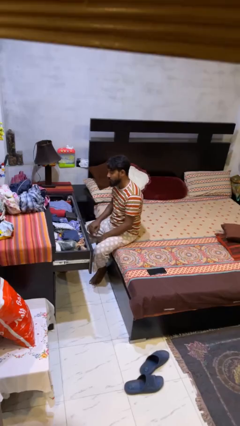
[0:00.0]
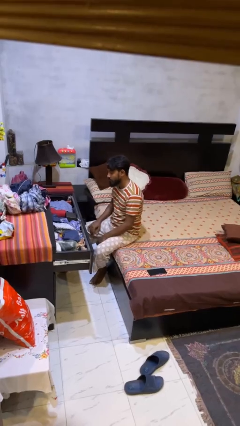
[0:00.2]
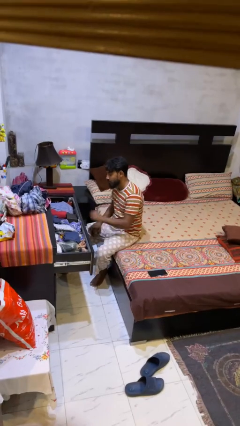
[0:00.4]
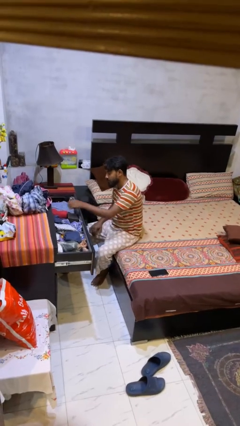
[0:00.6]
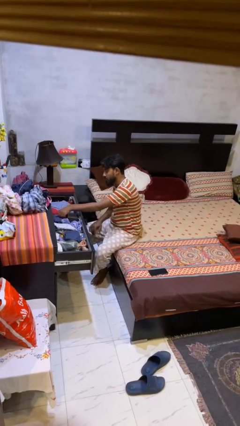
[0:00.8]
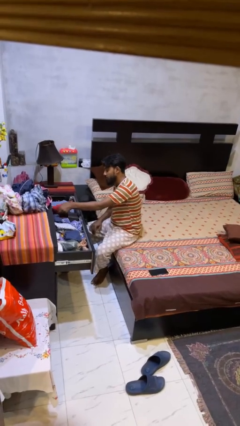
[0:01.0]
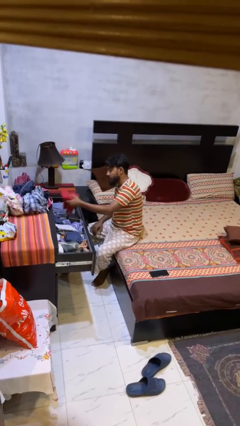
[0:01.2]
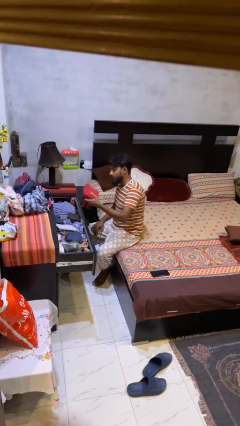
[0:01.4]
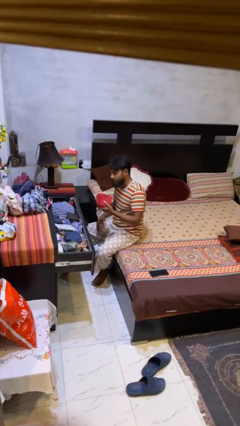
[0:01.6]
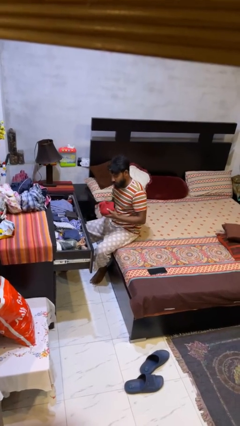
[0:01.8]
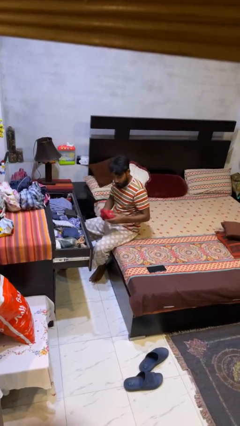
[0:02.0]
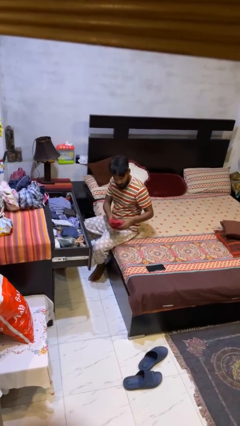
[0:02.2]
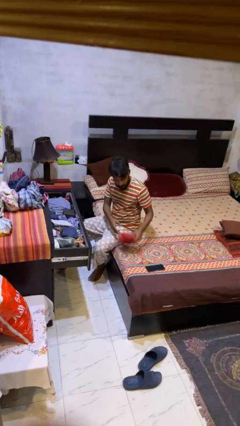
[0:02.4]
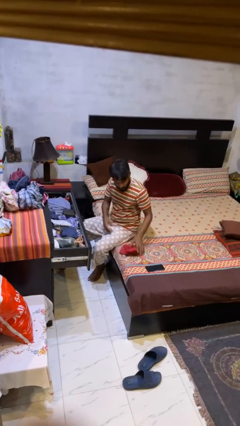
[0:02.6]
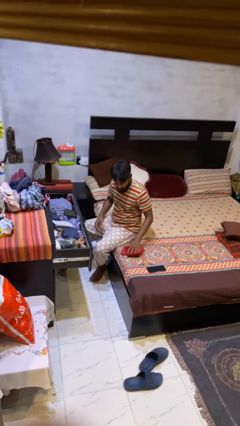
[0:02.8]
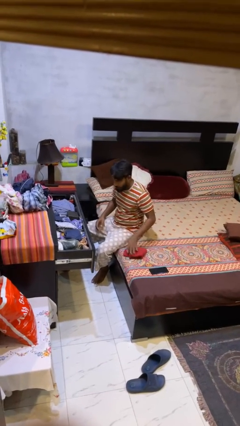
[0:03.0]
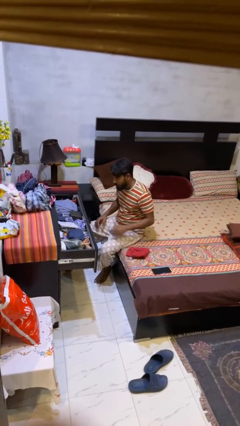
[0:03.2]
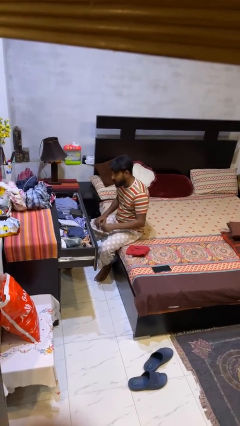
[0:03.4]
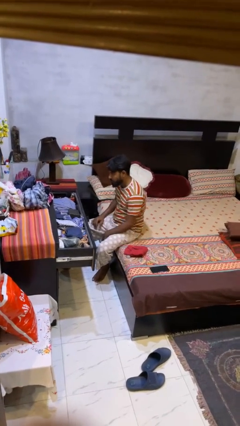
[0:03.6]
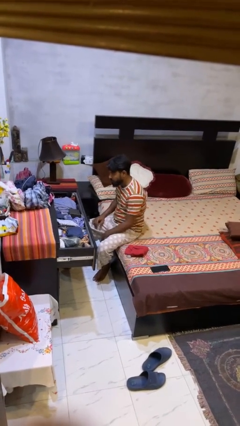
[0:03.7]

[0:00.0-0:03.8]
person takes clothes from dresser

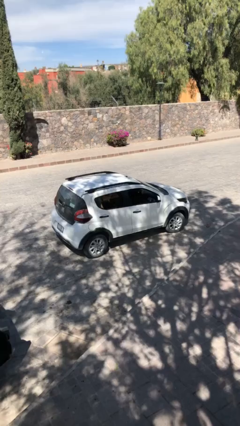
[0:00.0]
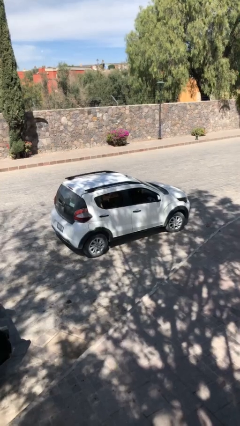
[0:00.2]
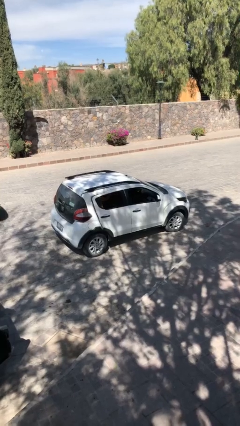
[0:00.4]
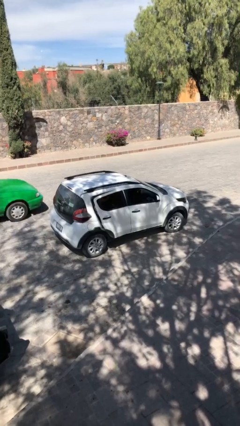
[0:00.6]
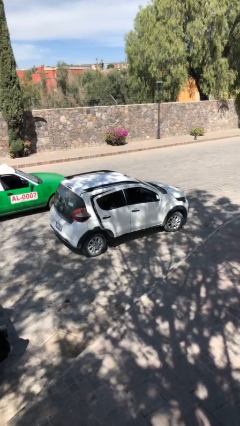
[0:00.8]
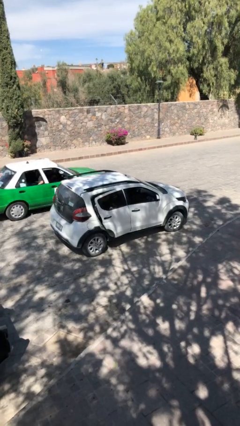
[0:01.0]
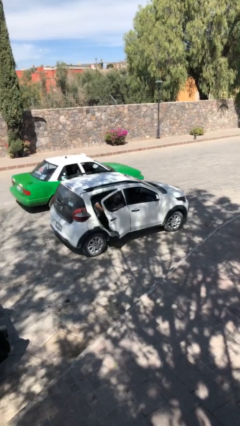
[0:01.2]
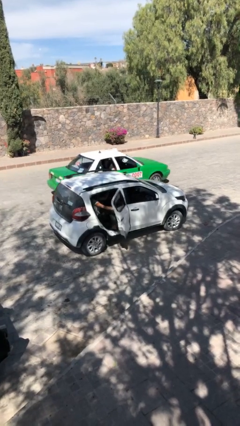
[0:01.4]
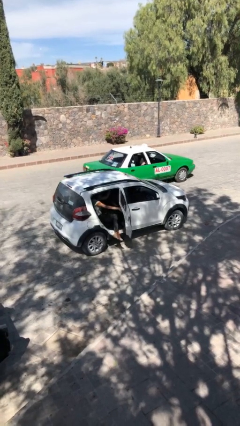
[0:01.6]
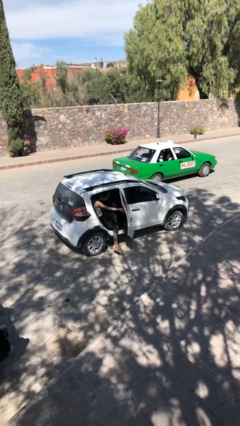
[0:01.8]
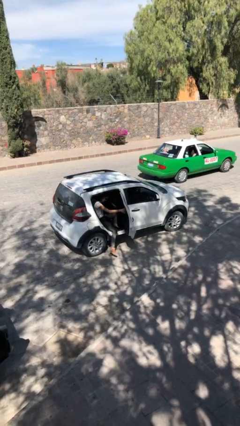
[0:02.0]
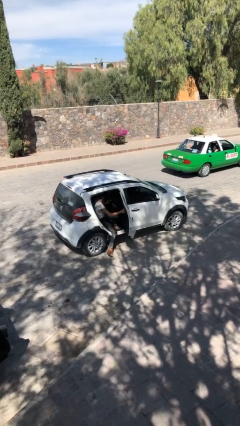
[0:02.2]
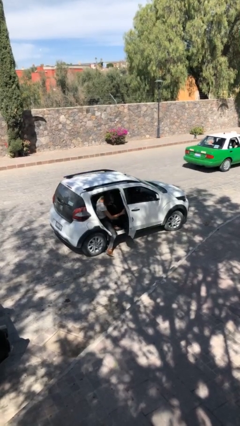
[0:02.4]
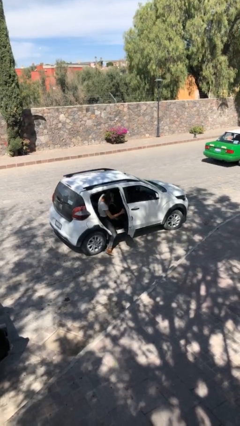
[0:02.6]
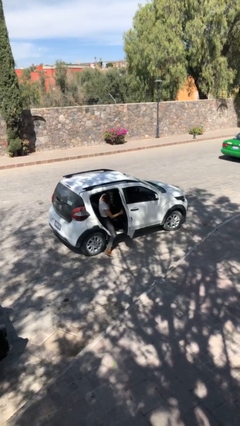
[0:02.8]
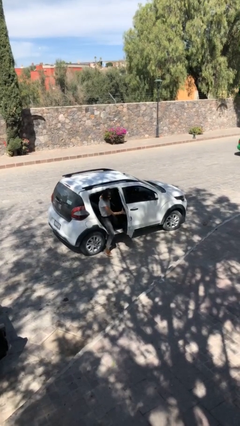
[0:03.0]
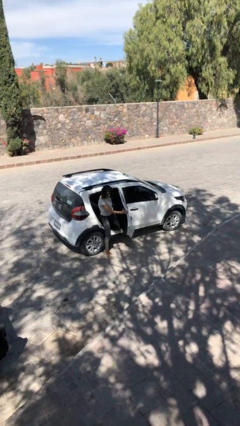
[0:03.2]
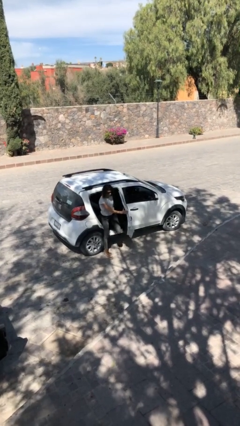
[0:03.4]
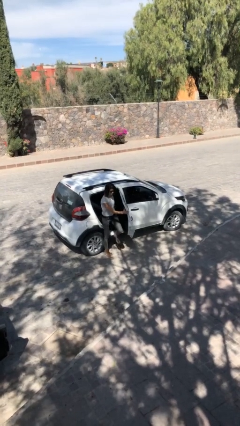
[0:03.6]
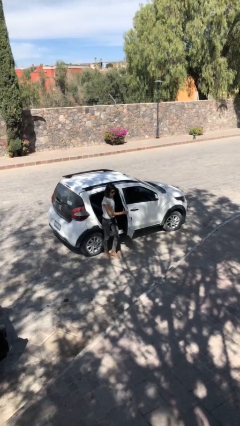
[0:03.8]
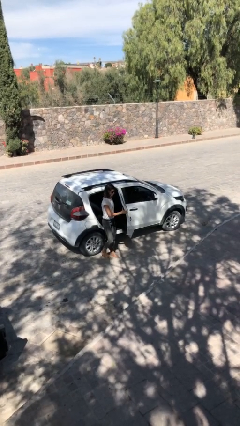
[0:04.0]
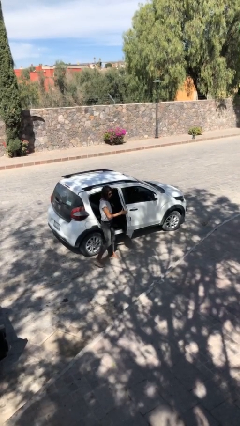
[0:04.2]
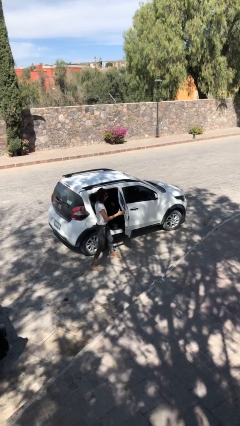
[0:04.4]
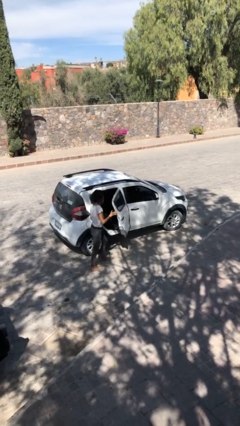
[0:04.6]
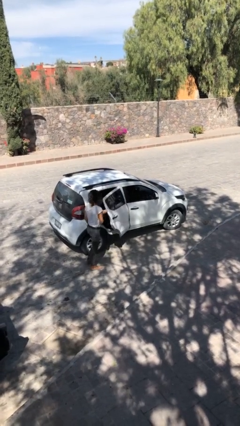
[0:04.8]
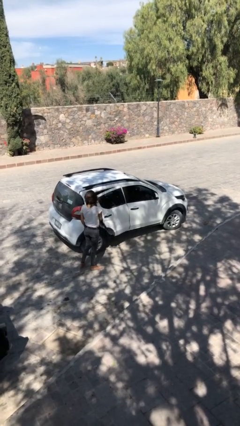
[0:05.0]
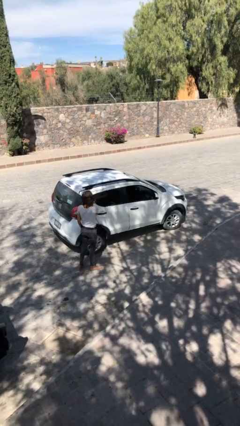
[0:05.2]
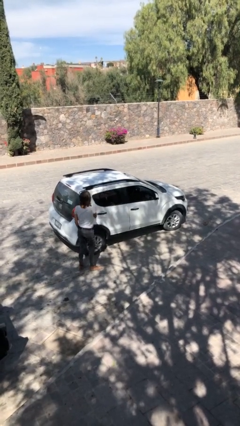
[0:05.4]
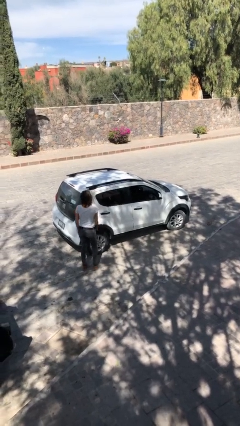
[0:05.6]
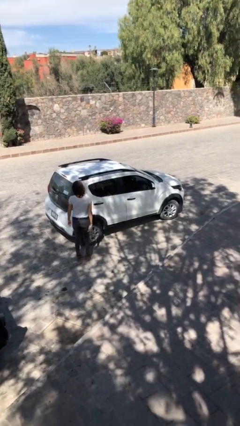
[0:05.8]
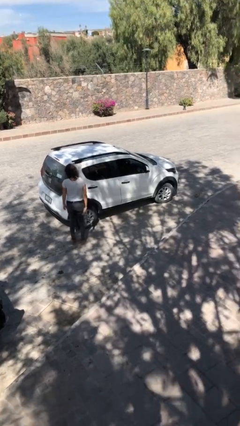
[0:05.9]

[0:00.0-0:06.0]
car drops off person

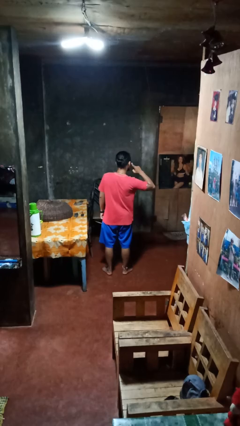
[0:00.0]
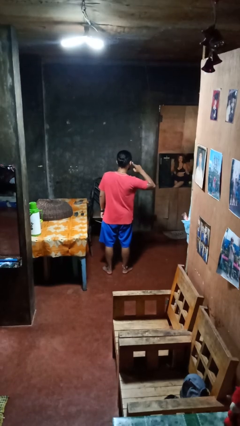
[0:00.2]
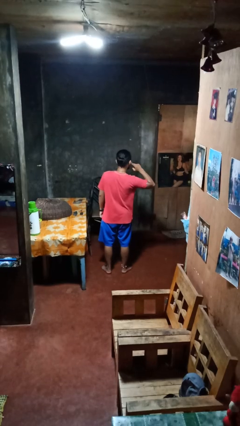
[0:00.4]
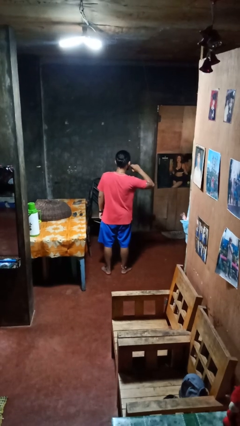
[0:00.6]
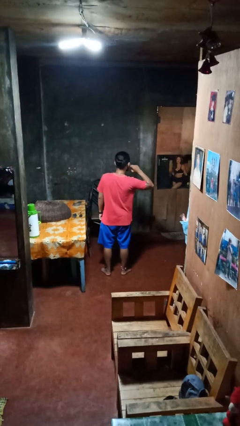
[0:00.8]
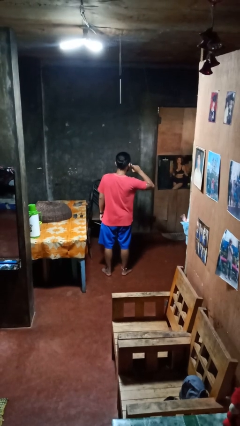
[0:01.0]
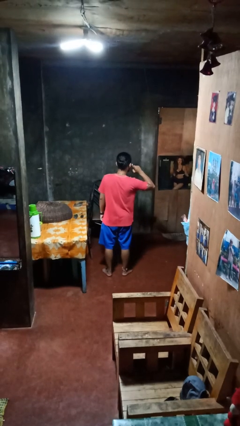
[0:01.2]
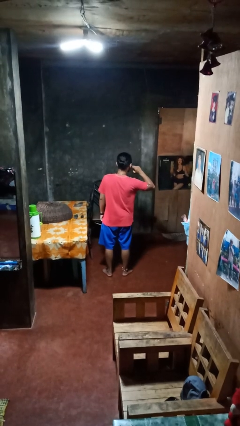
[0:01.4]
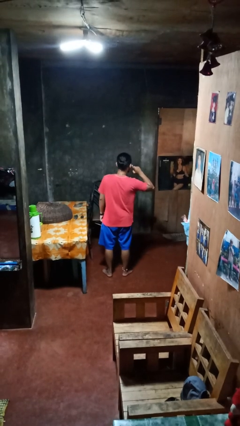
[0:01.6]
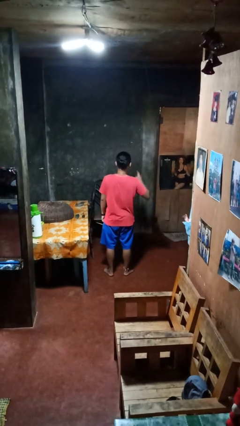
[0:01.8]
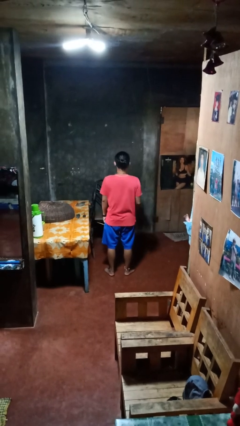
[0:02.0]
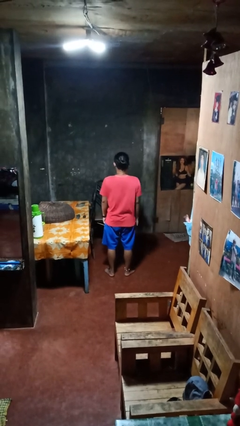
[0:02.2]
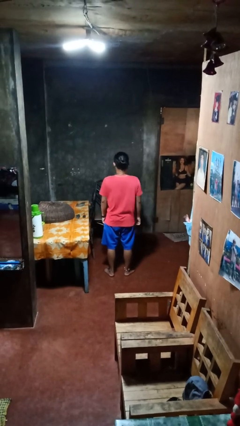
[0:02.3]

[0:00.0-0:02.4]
person gestures listen closely

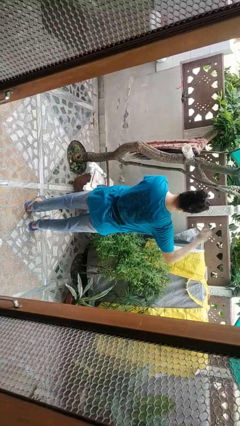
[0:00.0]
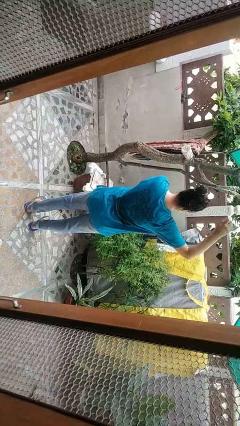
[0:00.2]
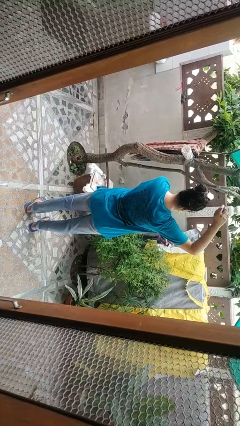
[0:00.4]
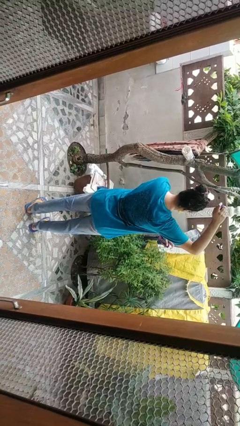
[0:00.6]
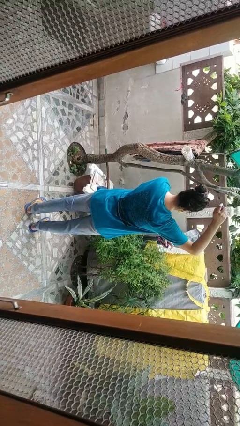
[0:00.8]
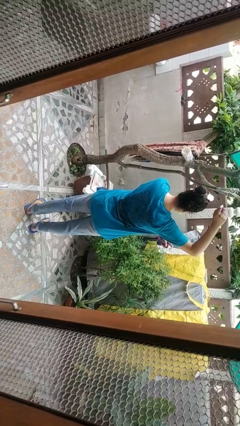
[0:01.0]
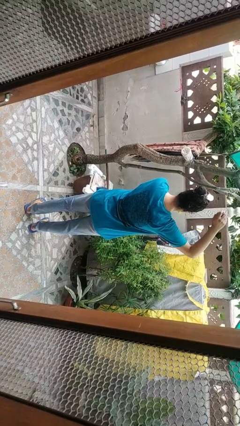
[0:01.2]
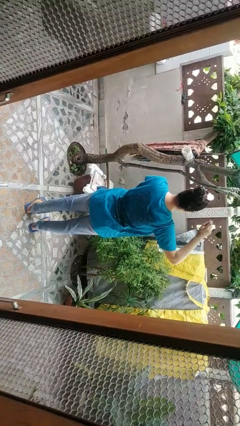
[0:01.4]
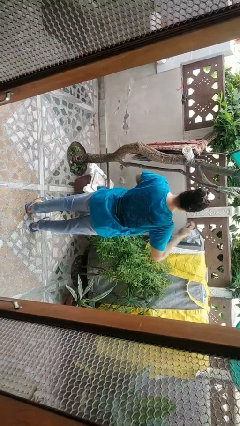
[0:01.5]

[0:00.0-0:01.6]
person applies deodorant

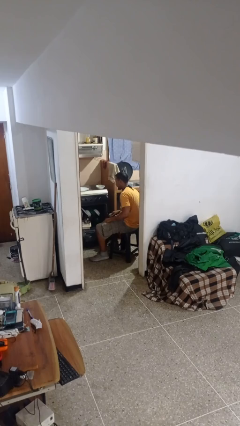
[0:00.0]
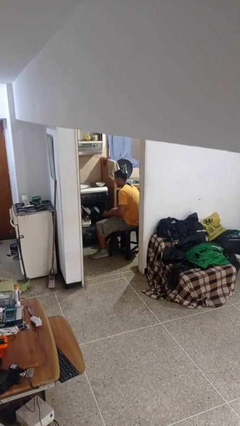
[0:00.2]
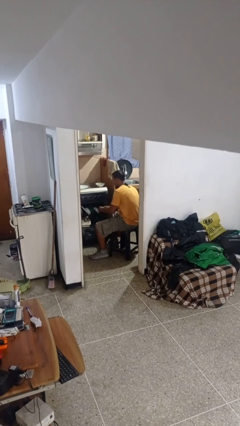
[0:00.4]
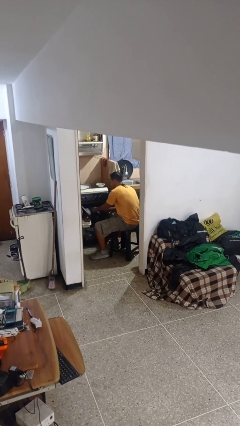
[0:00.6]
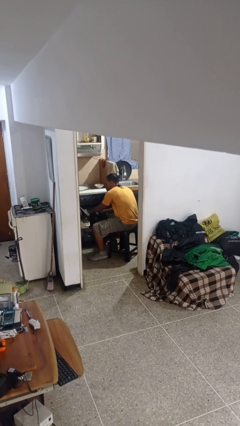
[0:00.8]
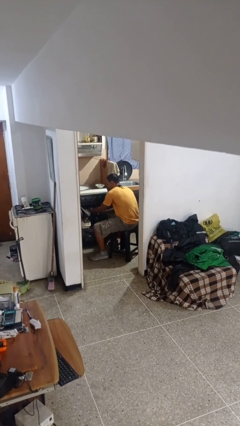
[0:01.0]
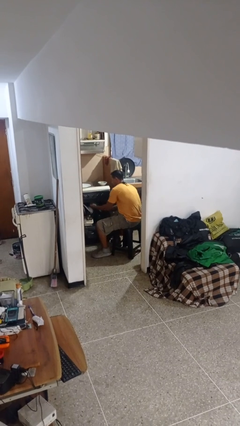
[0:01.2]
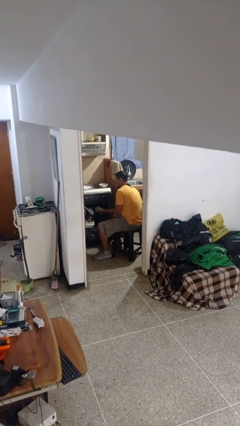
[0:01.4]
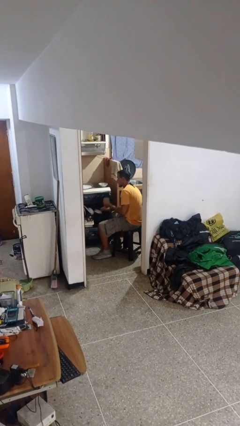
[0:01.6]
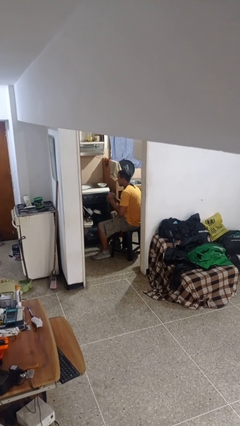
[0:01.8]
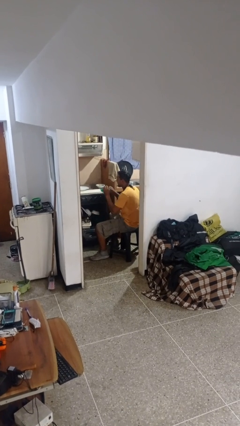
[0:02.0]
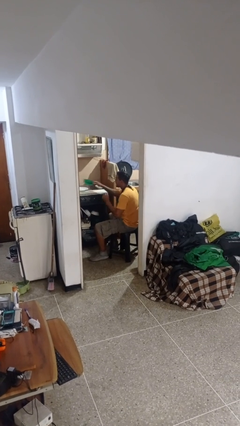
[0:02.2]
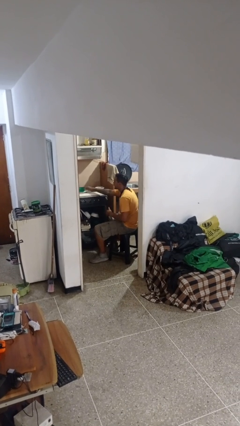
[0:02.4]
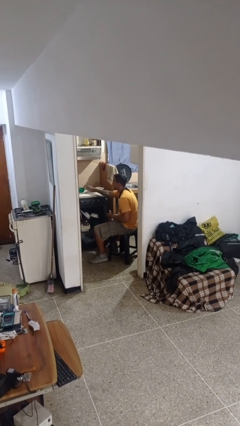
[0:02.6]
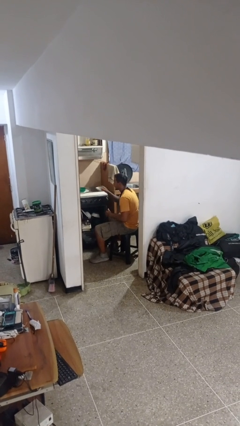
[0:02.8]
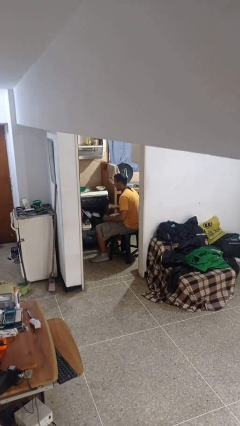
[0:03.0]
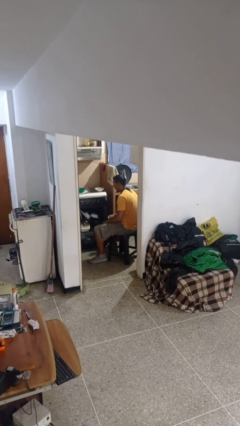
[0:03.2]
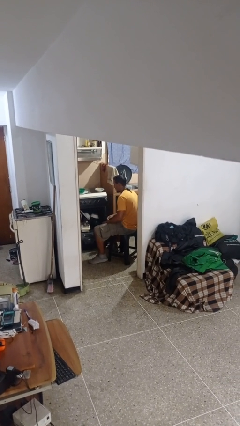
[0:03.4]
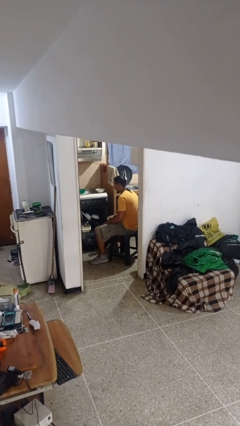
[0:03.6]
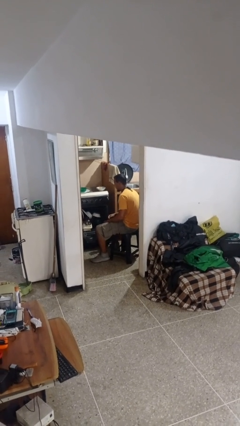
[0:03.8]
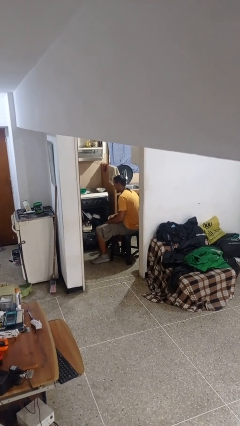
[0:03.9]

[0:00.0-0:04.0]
person unloads dishwasher
